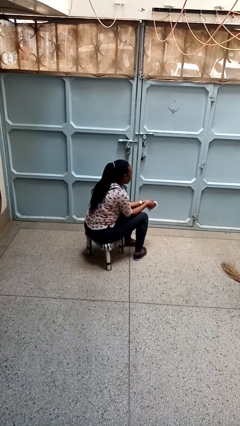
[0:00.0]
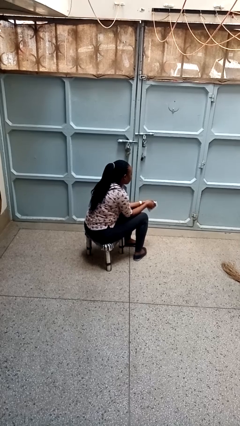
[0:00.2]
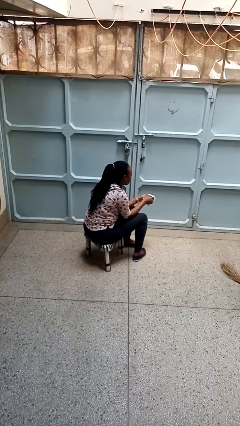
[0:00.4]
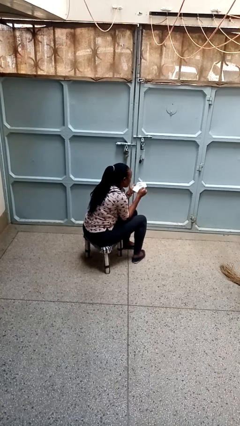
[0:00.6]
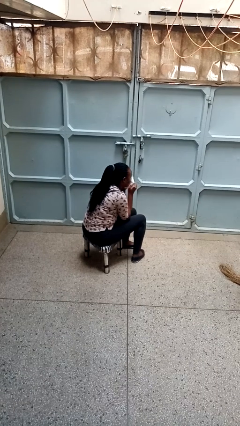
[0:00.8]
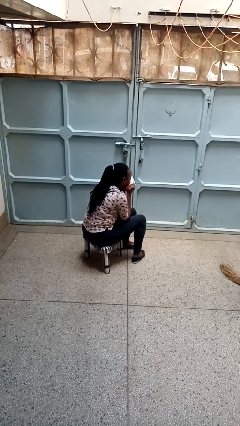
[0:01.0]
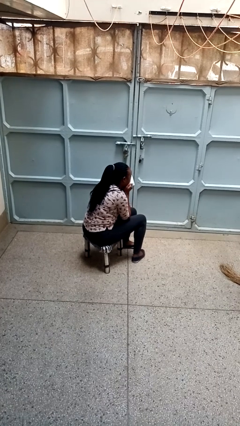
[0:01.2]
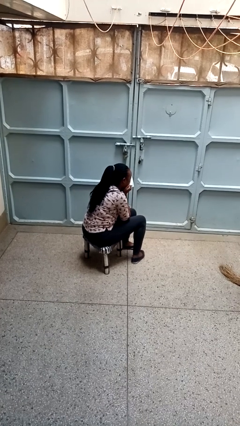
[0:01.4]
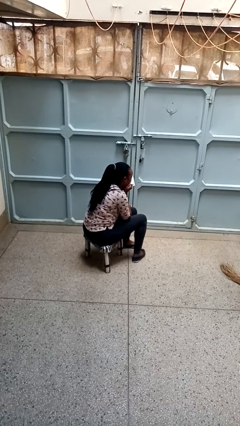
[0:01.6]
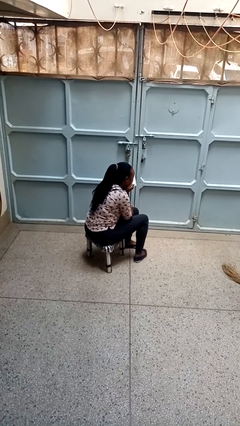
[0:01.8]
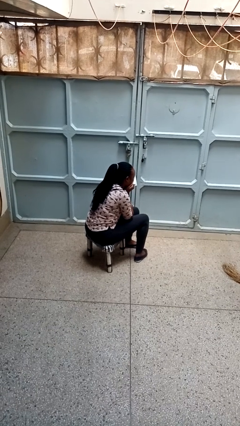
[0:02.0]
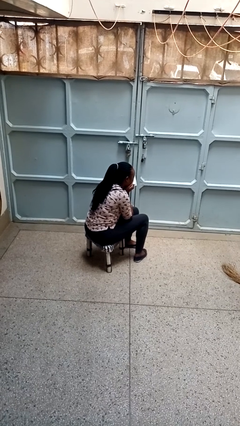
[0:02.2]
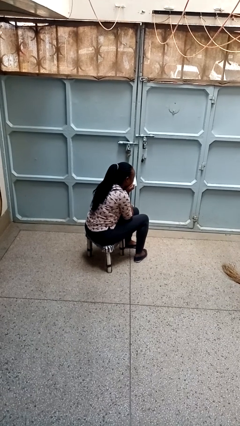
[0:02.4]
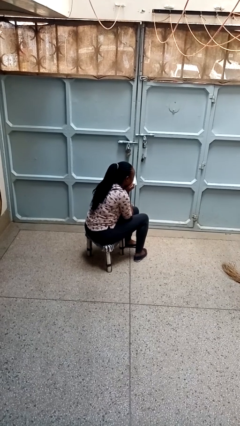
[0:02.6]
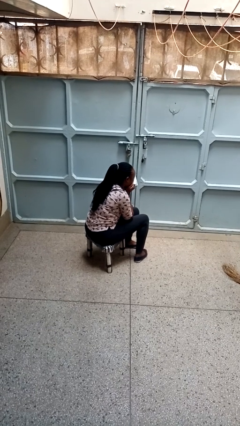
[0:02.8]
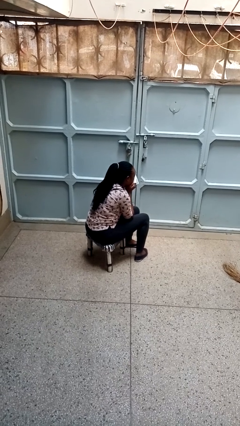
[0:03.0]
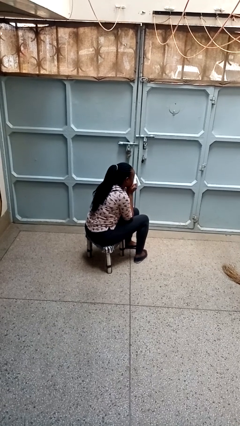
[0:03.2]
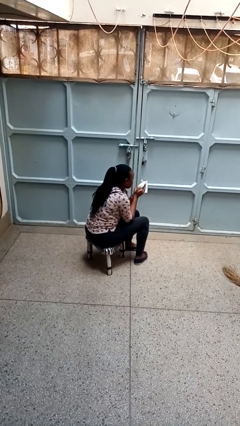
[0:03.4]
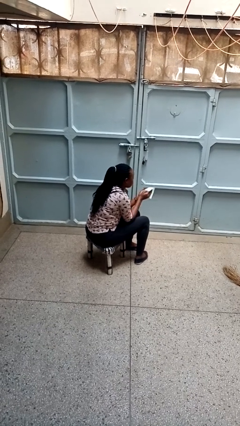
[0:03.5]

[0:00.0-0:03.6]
person blows nose

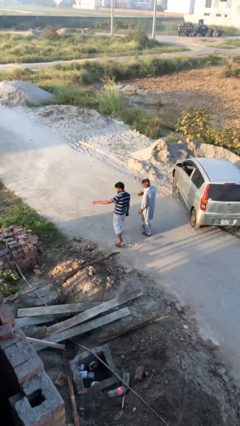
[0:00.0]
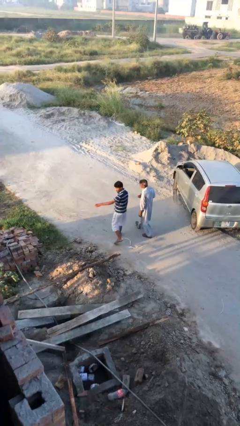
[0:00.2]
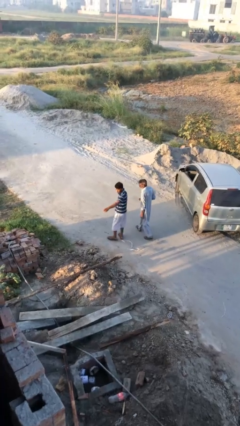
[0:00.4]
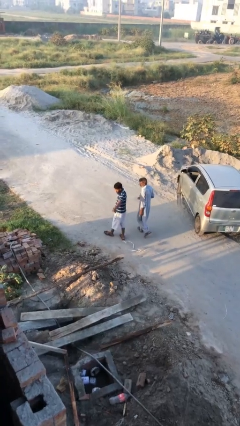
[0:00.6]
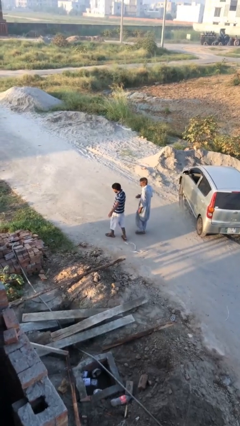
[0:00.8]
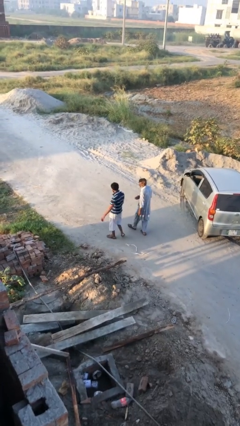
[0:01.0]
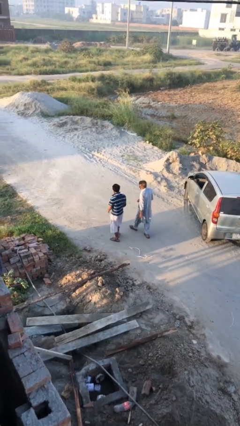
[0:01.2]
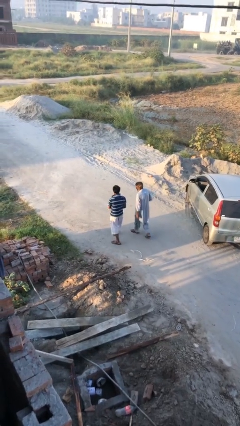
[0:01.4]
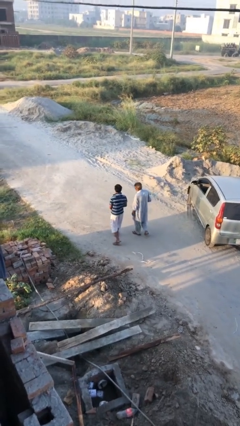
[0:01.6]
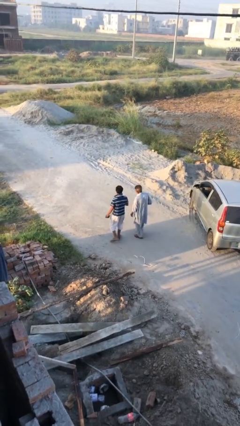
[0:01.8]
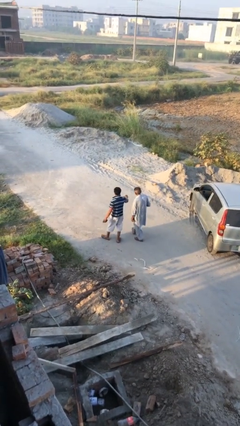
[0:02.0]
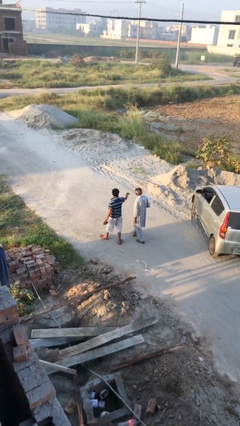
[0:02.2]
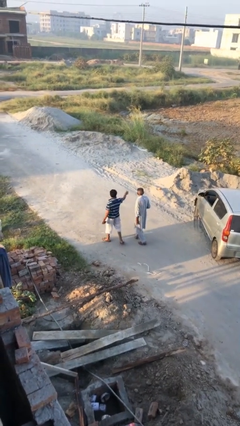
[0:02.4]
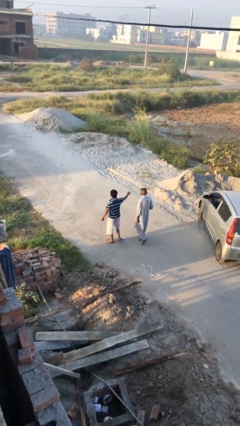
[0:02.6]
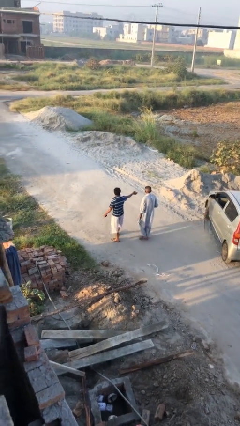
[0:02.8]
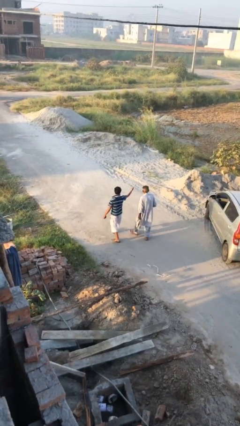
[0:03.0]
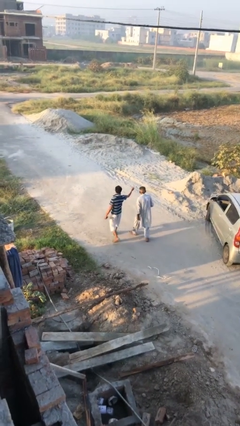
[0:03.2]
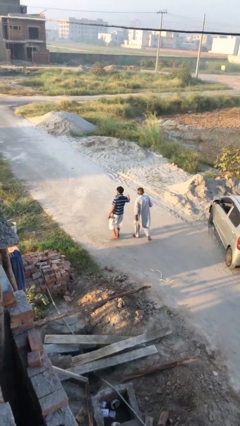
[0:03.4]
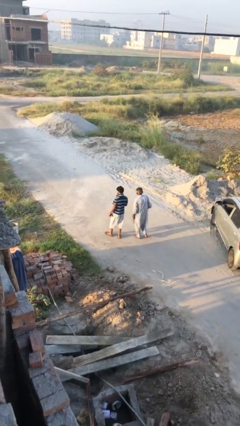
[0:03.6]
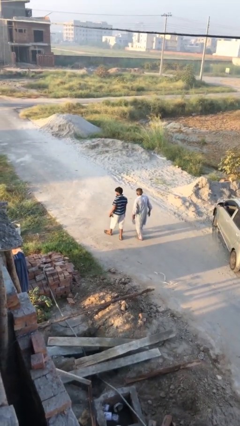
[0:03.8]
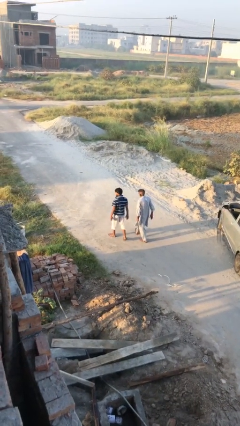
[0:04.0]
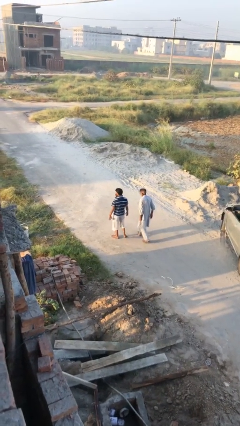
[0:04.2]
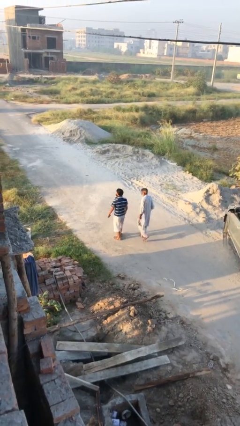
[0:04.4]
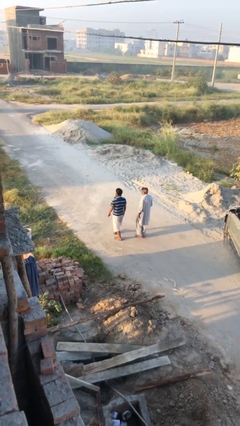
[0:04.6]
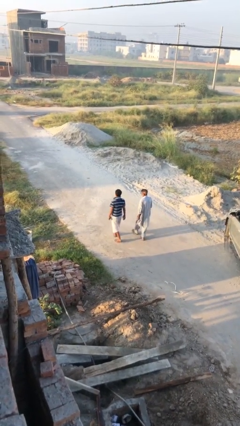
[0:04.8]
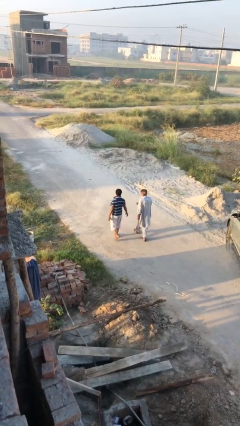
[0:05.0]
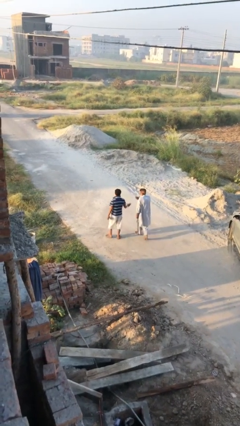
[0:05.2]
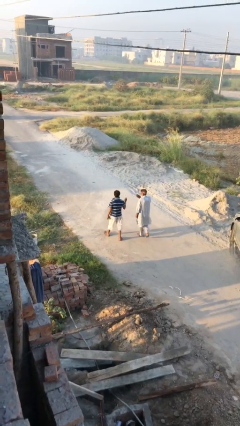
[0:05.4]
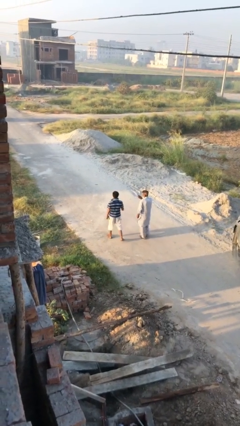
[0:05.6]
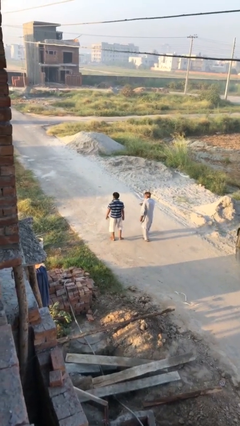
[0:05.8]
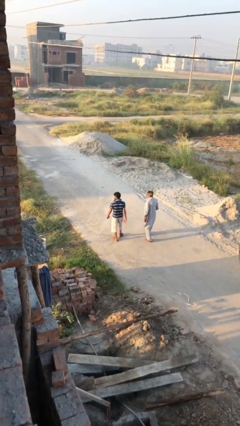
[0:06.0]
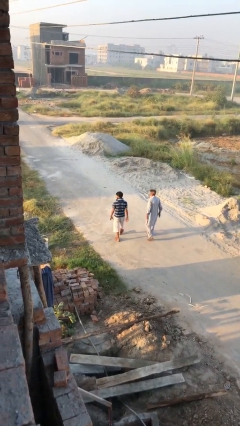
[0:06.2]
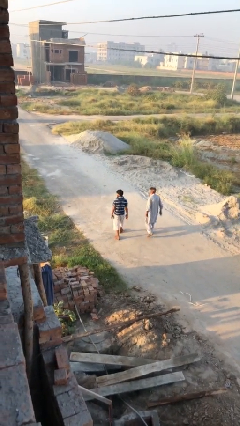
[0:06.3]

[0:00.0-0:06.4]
person talks to person

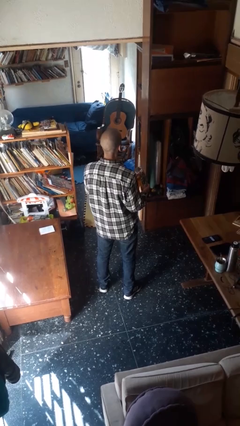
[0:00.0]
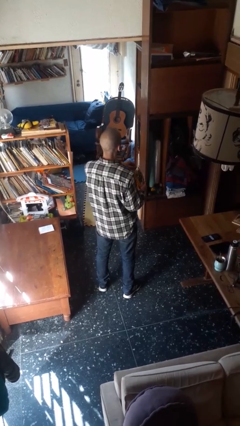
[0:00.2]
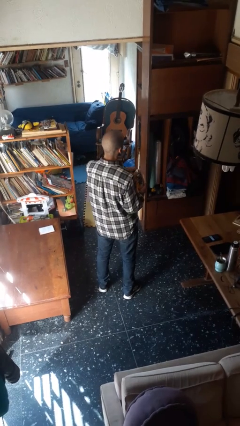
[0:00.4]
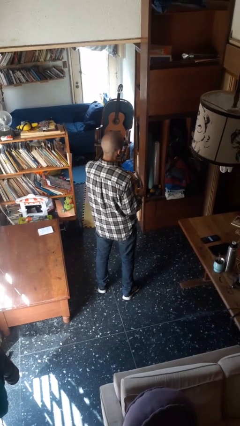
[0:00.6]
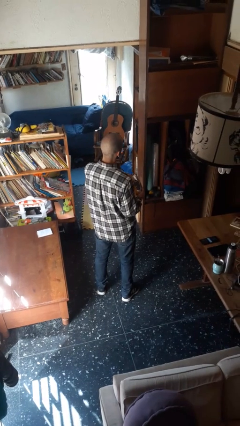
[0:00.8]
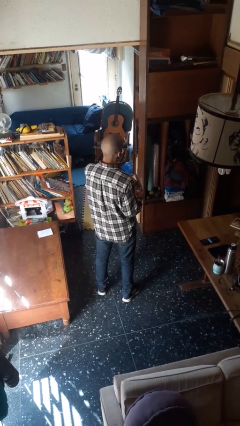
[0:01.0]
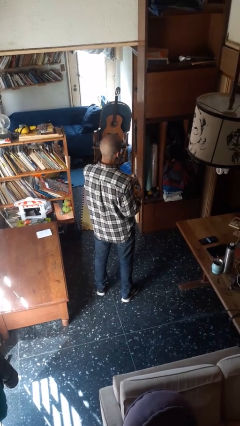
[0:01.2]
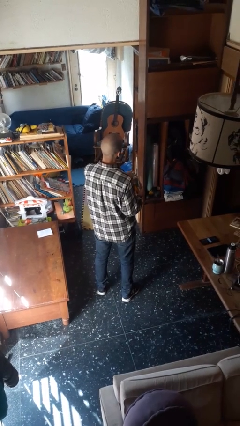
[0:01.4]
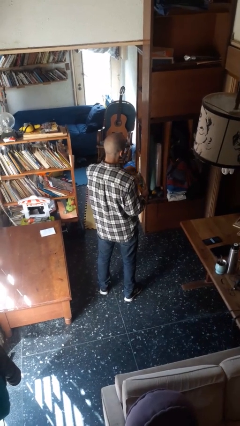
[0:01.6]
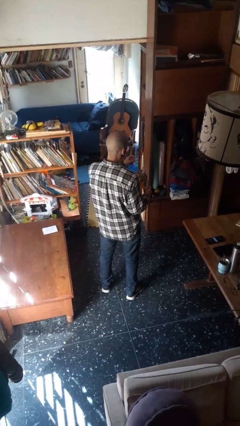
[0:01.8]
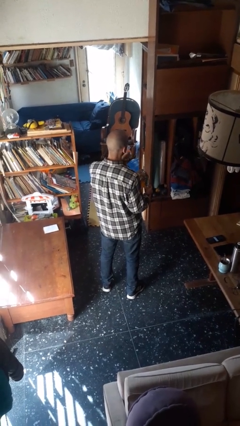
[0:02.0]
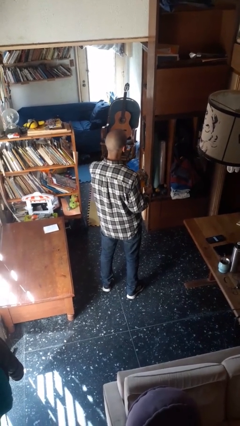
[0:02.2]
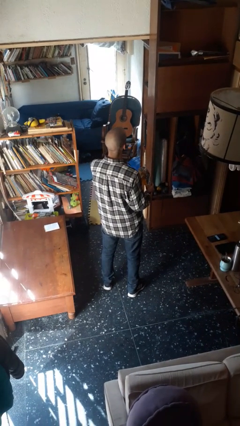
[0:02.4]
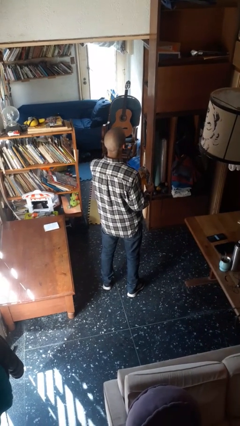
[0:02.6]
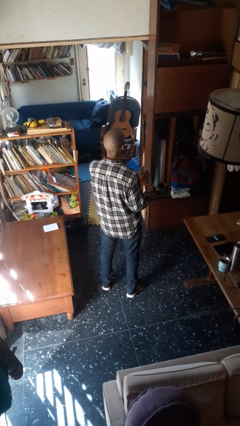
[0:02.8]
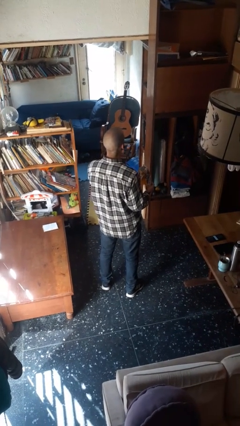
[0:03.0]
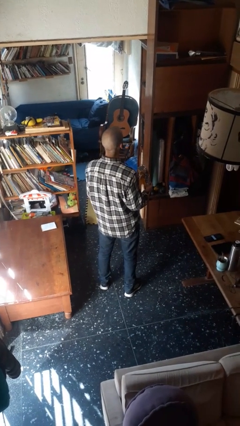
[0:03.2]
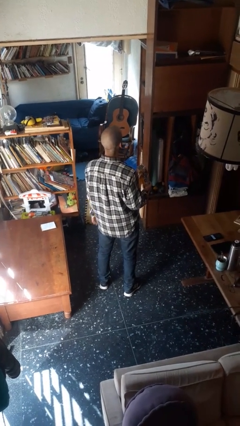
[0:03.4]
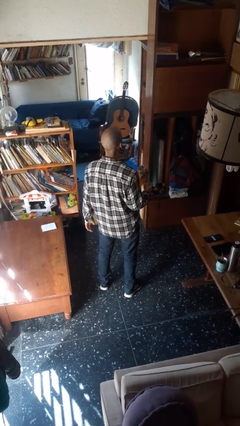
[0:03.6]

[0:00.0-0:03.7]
person eats snack from bag

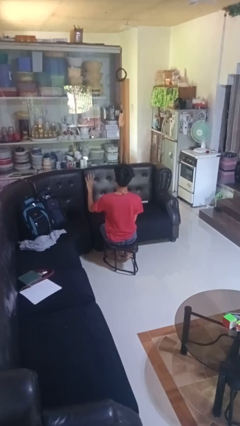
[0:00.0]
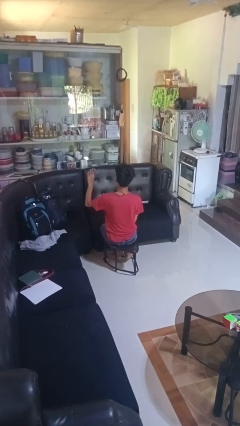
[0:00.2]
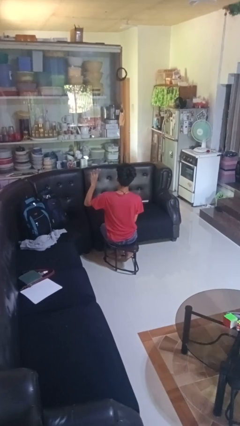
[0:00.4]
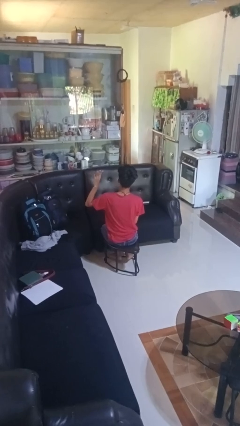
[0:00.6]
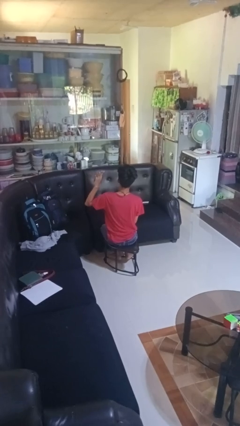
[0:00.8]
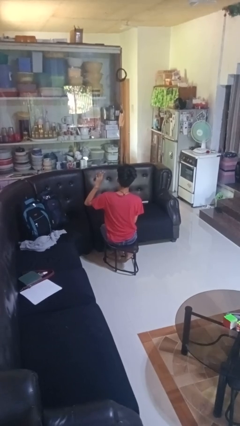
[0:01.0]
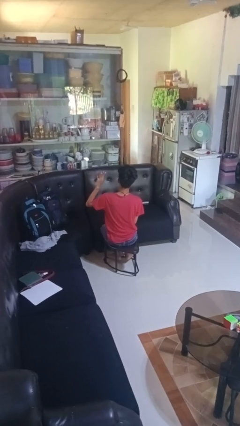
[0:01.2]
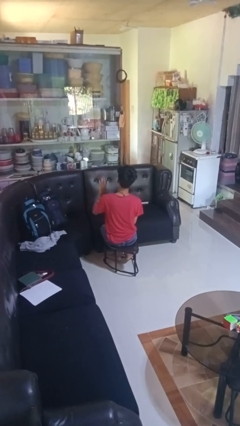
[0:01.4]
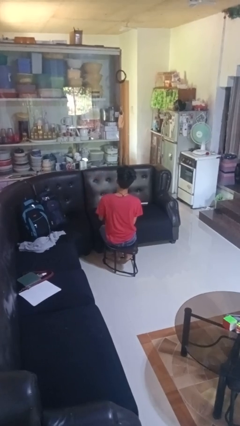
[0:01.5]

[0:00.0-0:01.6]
person gestures number four

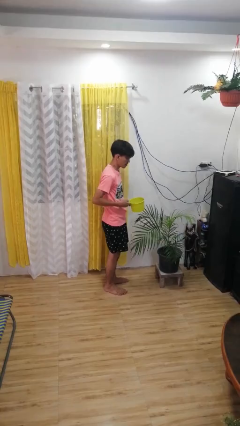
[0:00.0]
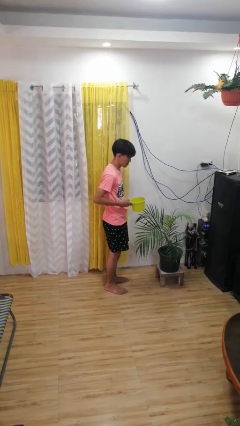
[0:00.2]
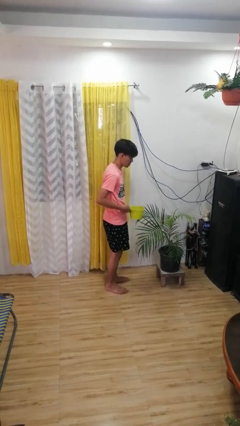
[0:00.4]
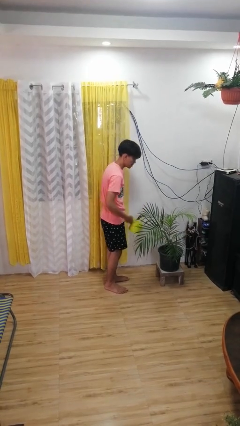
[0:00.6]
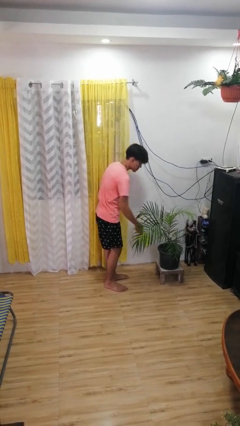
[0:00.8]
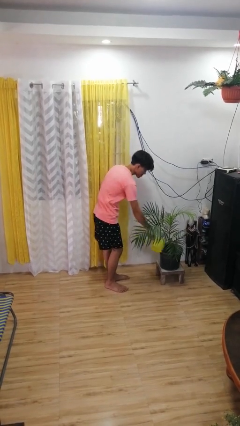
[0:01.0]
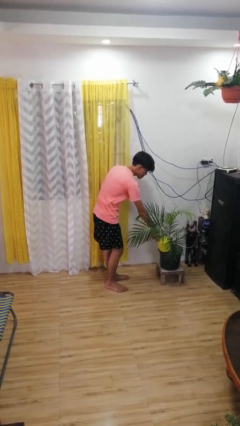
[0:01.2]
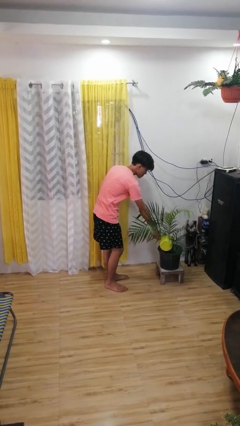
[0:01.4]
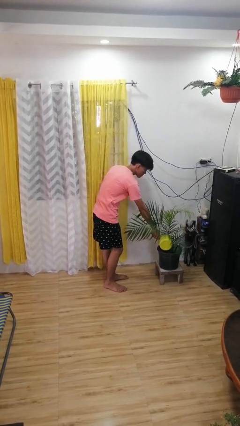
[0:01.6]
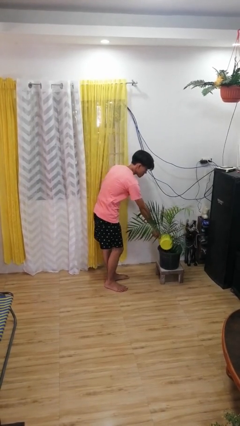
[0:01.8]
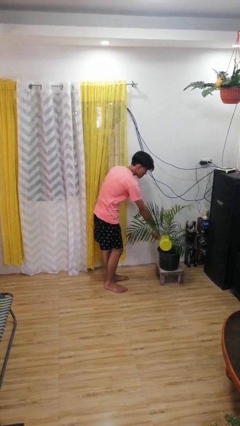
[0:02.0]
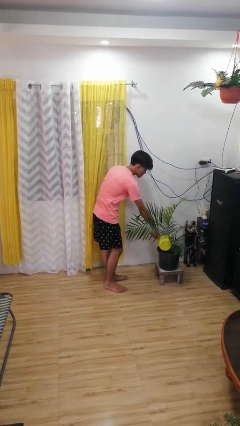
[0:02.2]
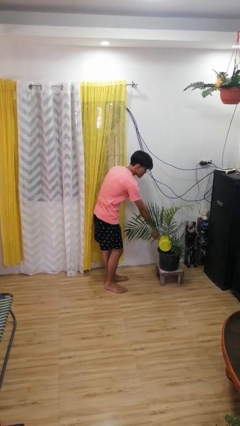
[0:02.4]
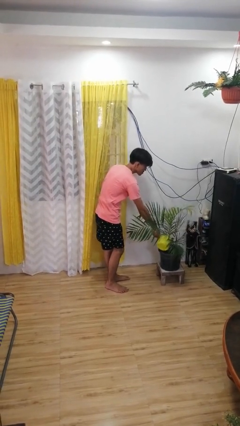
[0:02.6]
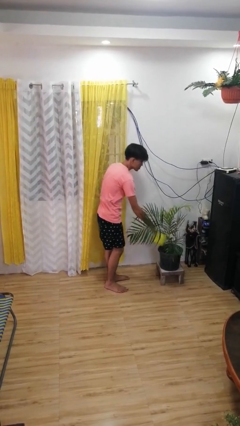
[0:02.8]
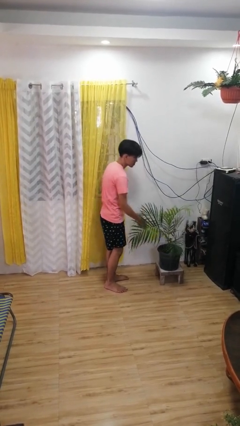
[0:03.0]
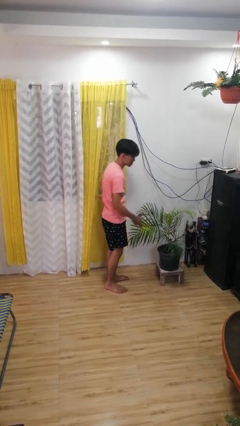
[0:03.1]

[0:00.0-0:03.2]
person waters houseplant
